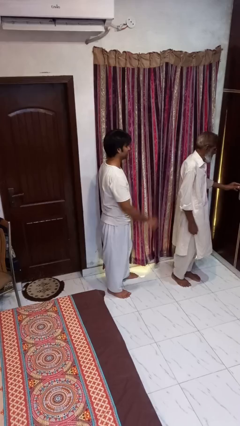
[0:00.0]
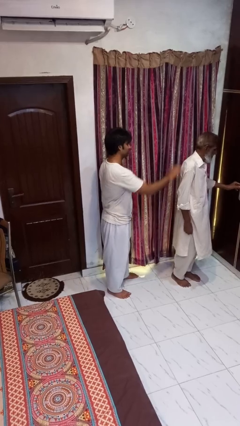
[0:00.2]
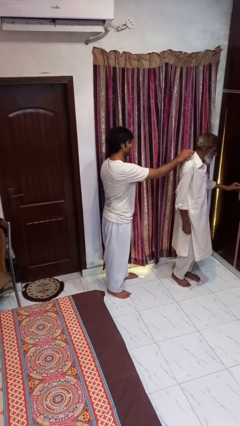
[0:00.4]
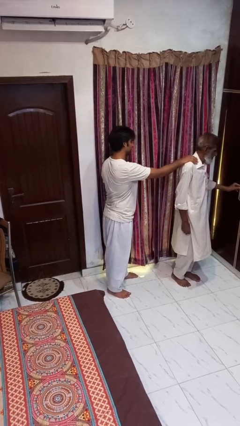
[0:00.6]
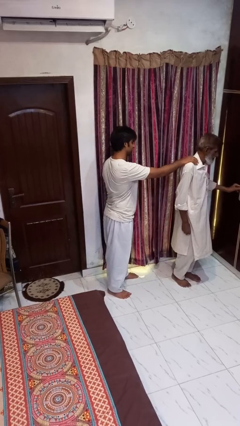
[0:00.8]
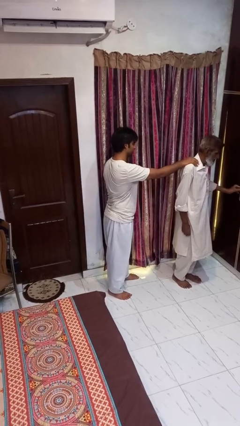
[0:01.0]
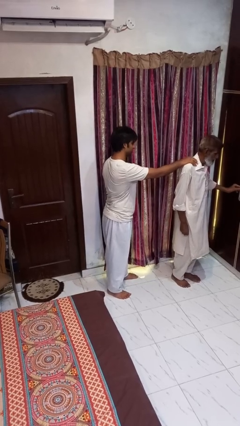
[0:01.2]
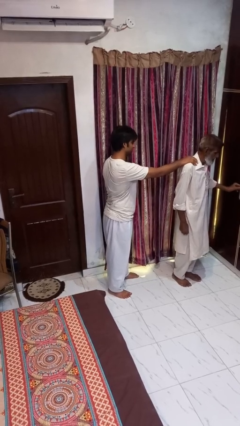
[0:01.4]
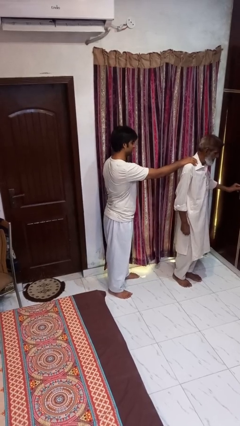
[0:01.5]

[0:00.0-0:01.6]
person grabs person by shoulder

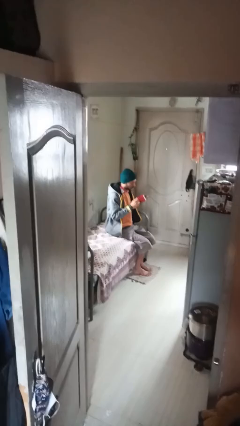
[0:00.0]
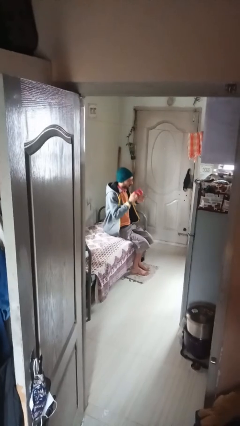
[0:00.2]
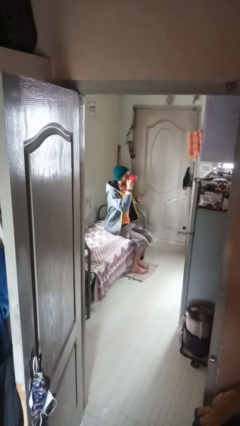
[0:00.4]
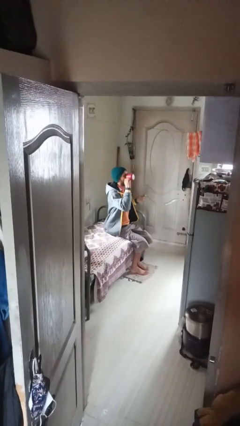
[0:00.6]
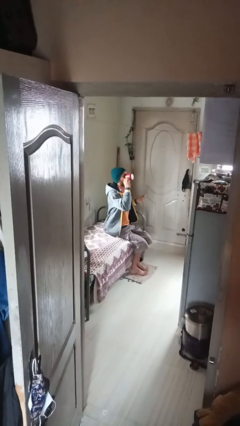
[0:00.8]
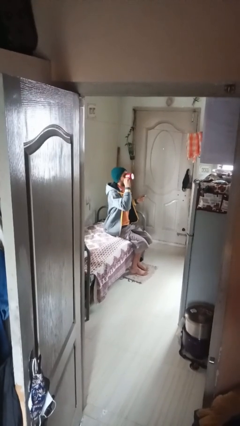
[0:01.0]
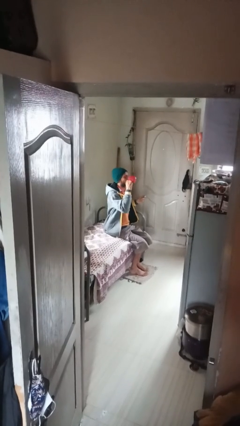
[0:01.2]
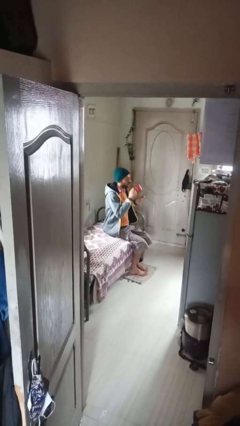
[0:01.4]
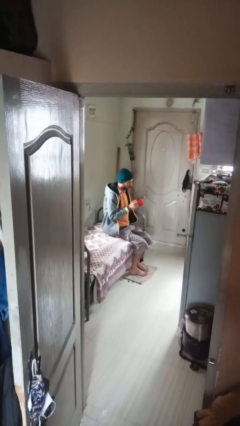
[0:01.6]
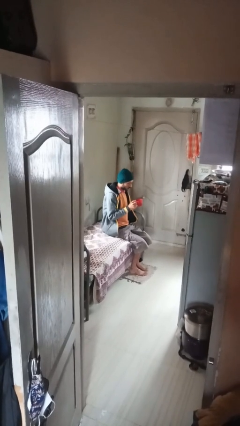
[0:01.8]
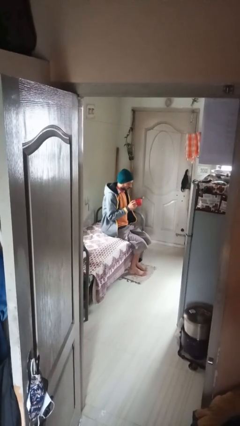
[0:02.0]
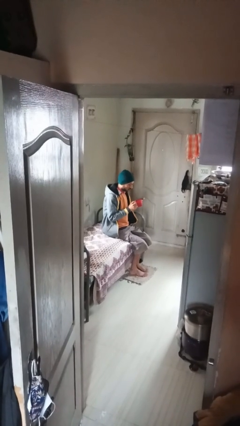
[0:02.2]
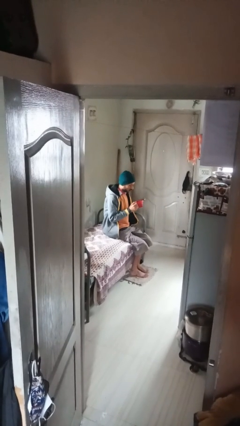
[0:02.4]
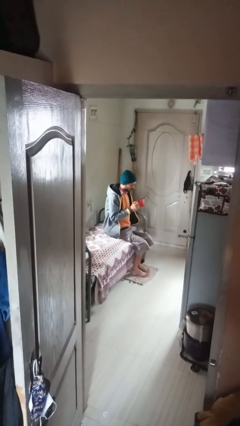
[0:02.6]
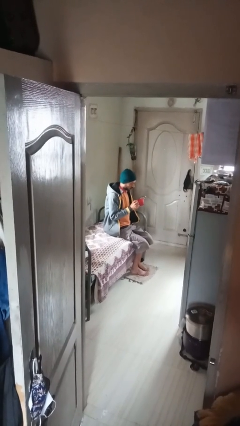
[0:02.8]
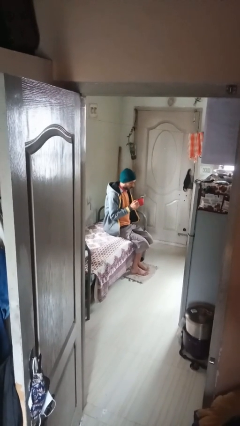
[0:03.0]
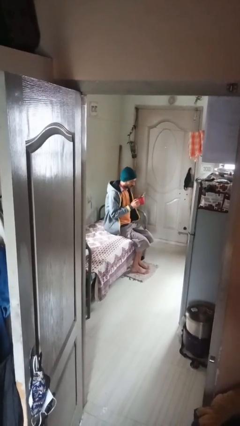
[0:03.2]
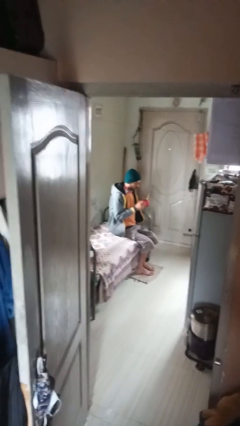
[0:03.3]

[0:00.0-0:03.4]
person drinks from mug

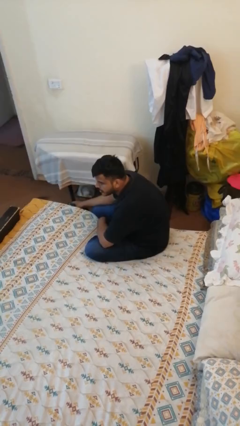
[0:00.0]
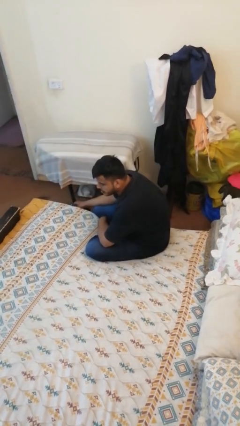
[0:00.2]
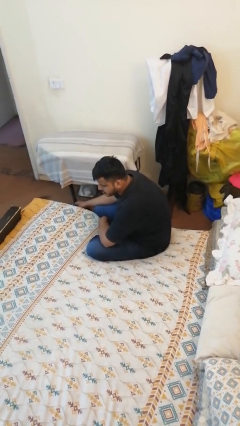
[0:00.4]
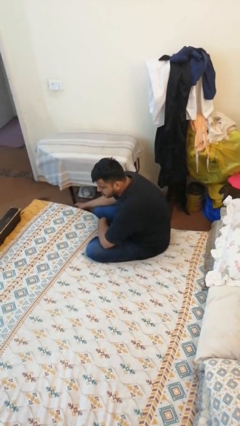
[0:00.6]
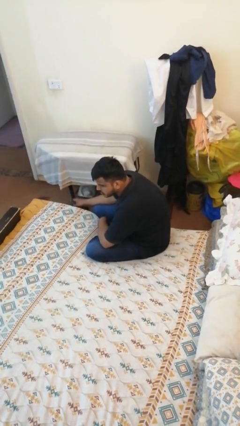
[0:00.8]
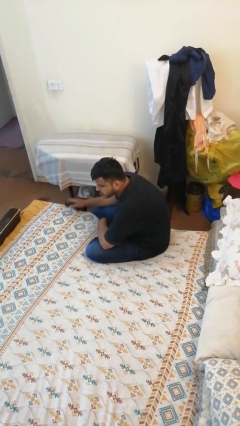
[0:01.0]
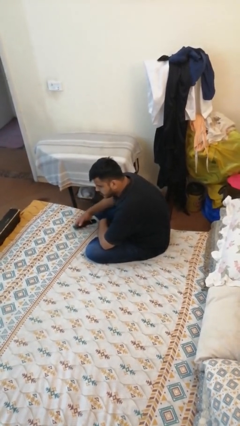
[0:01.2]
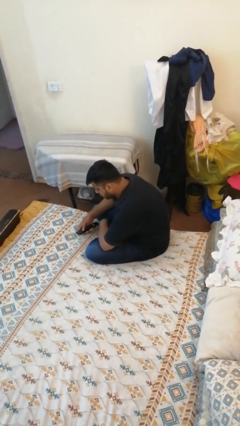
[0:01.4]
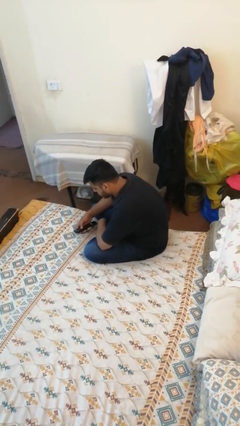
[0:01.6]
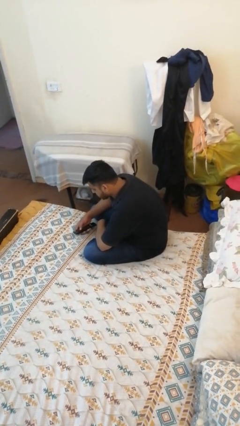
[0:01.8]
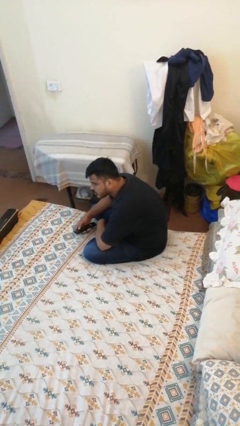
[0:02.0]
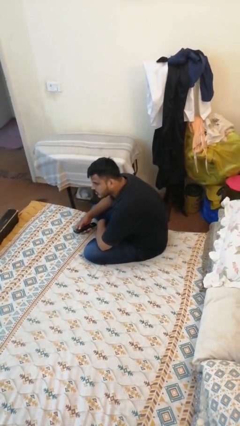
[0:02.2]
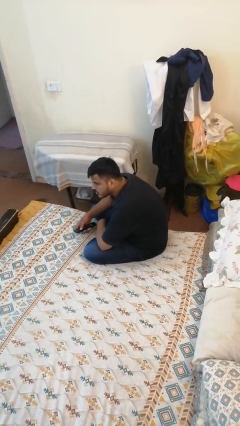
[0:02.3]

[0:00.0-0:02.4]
person uses television remote

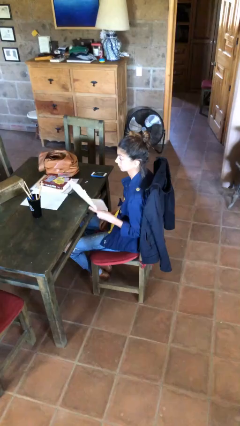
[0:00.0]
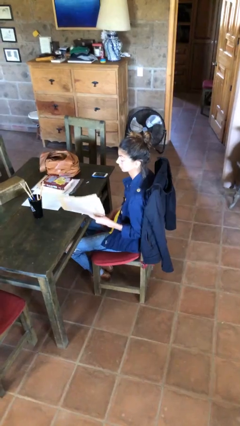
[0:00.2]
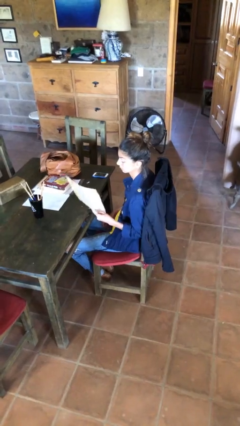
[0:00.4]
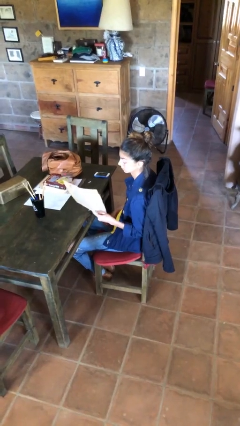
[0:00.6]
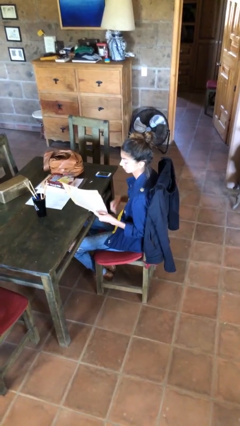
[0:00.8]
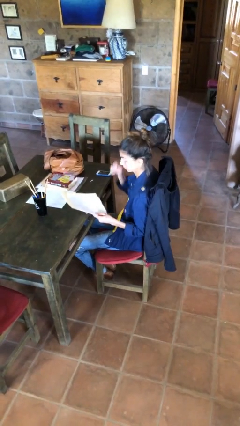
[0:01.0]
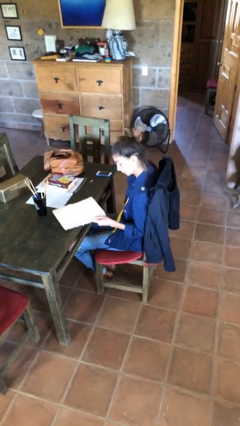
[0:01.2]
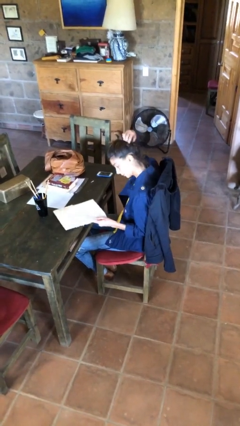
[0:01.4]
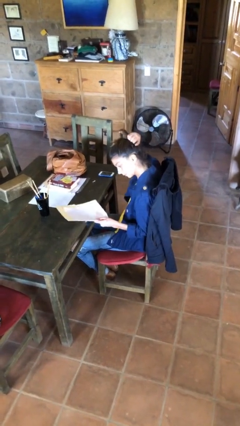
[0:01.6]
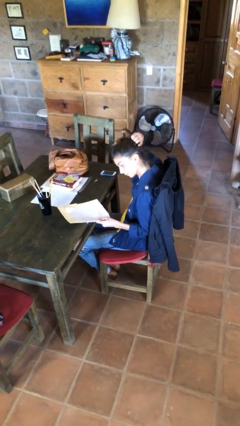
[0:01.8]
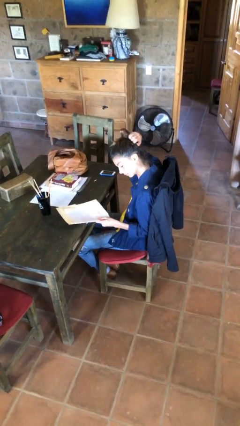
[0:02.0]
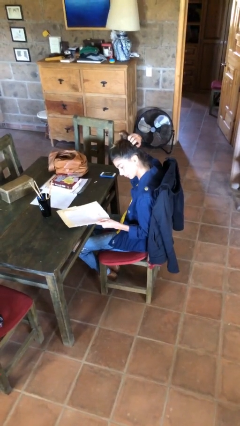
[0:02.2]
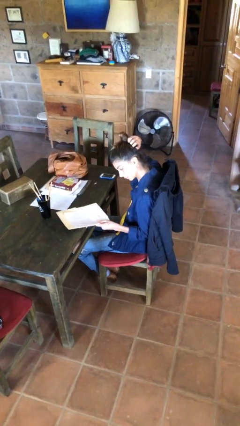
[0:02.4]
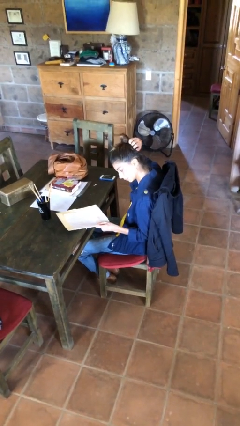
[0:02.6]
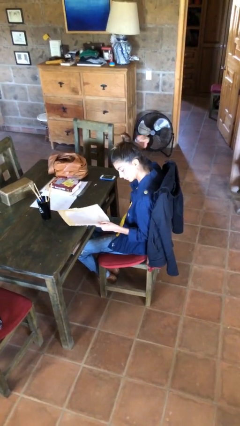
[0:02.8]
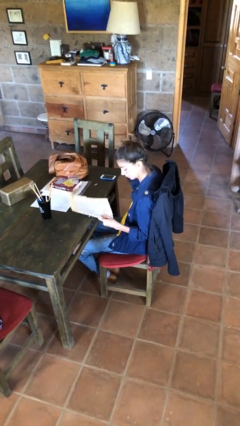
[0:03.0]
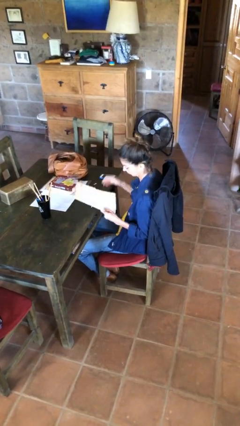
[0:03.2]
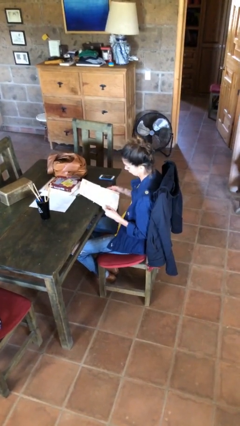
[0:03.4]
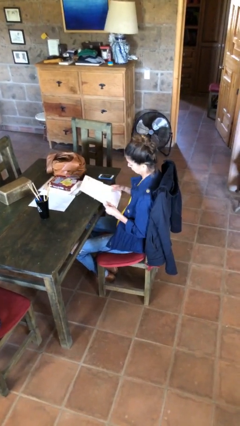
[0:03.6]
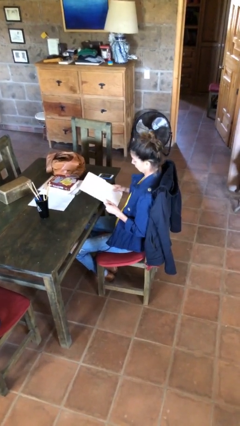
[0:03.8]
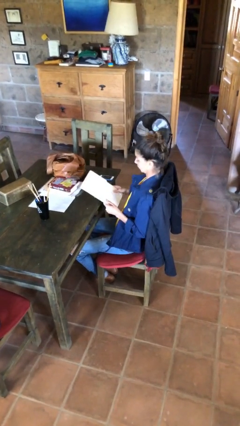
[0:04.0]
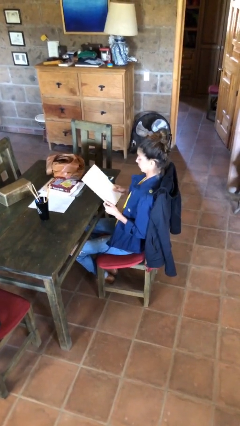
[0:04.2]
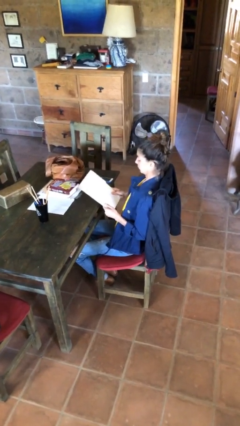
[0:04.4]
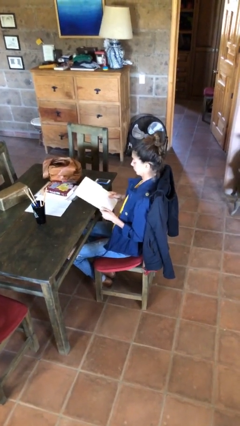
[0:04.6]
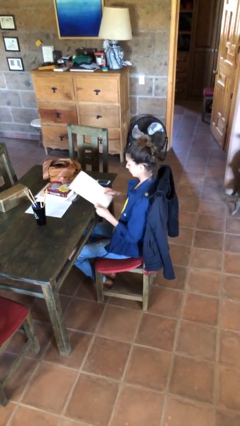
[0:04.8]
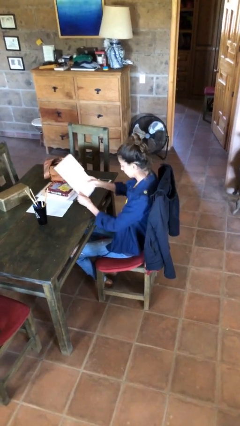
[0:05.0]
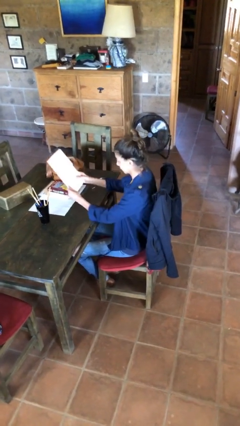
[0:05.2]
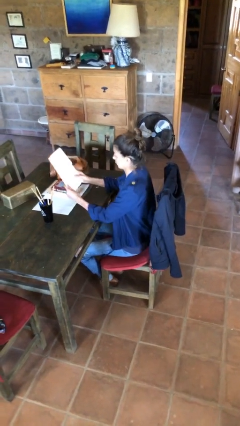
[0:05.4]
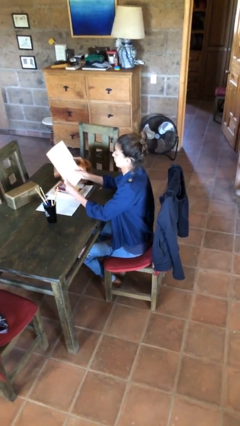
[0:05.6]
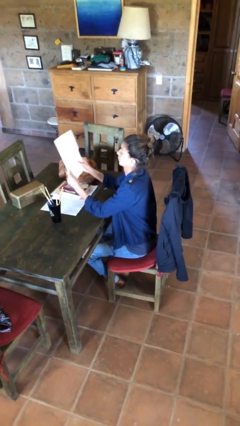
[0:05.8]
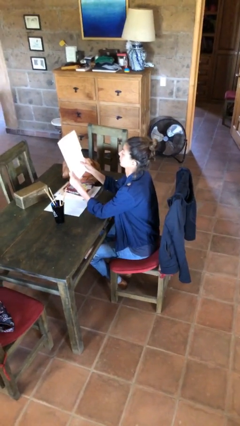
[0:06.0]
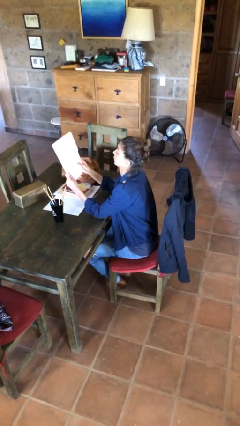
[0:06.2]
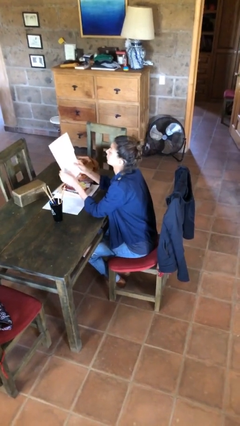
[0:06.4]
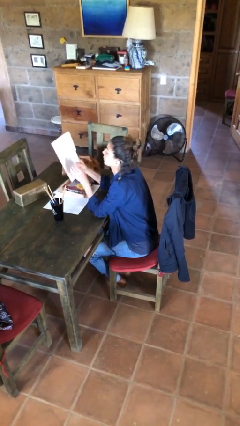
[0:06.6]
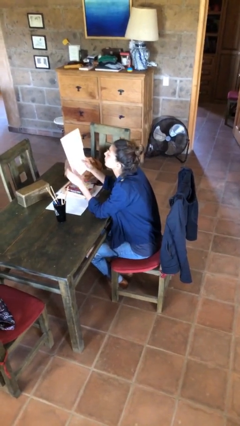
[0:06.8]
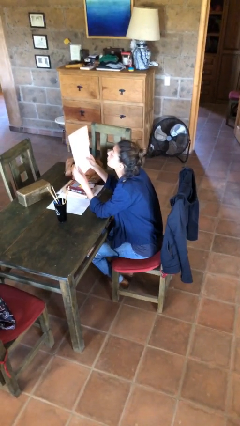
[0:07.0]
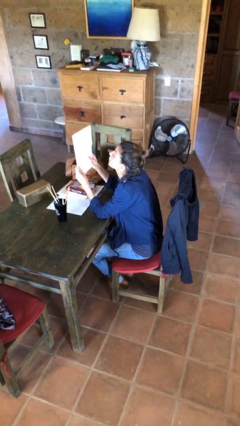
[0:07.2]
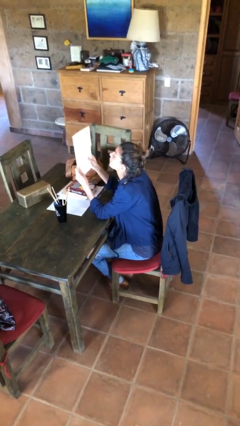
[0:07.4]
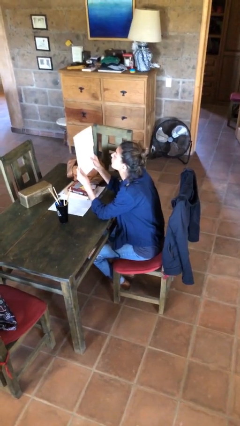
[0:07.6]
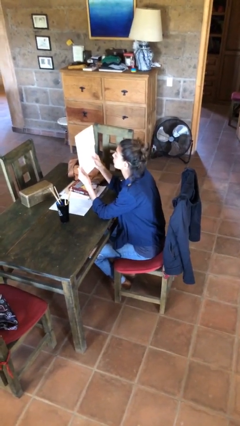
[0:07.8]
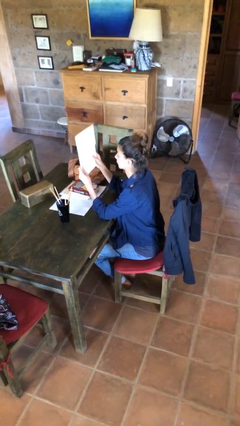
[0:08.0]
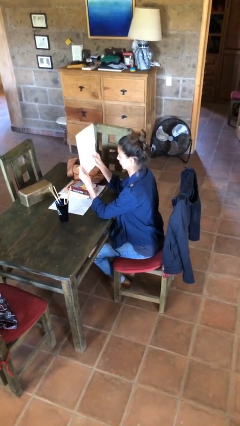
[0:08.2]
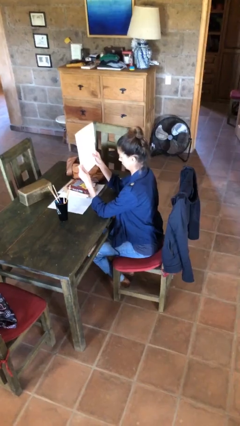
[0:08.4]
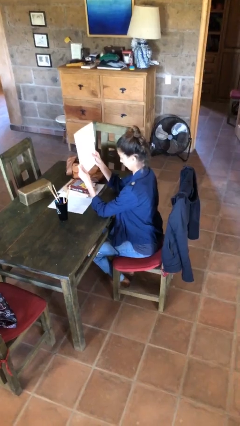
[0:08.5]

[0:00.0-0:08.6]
person reads document

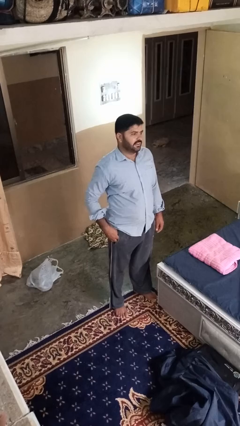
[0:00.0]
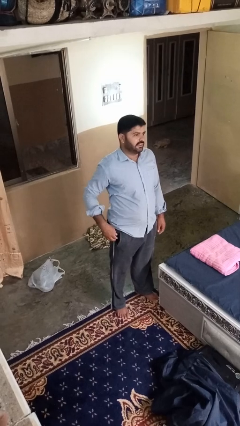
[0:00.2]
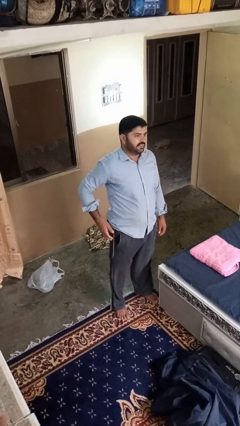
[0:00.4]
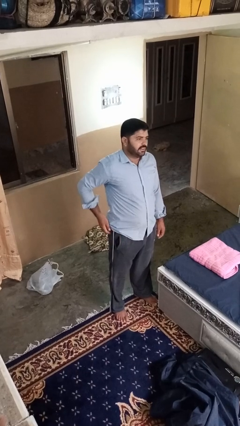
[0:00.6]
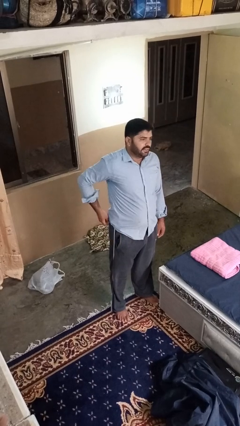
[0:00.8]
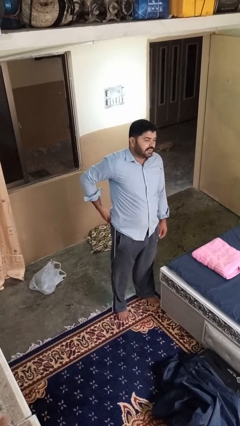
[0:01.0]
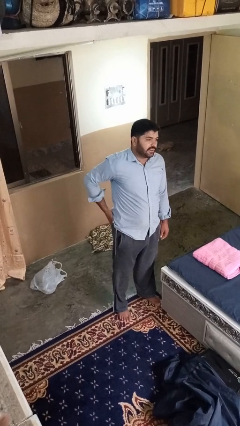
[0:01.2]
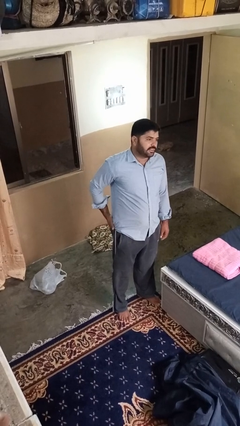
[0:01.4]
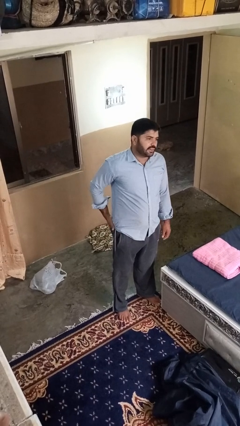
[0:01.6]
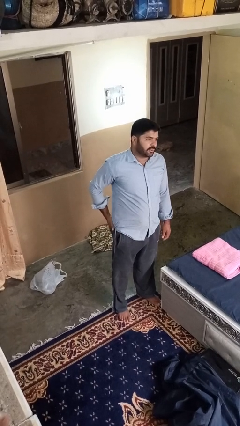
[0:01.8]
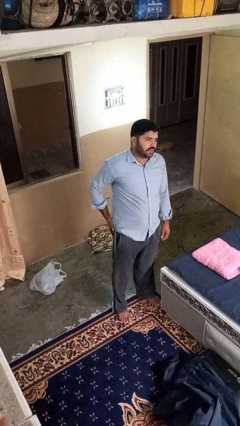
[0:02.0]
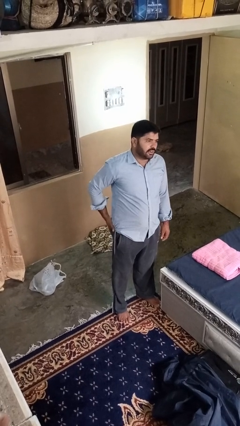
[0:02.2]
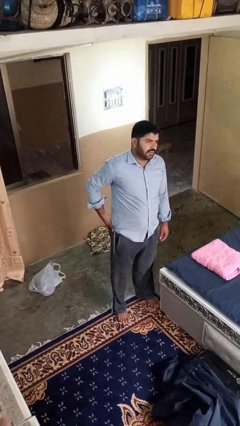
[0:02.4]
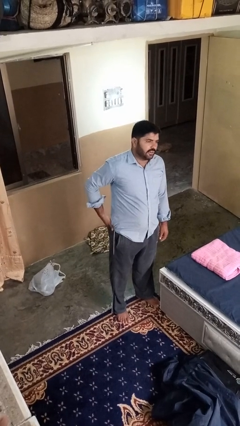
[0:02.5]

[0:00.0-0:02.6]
person puts hands in back pockets
